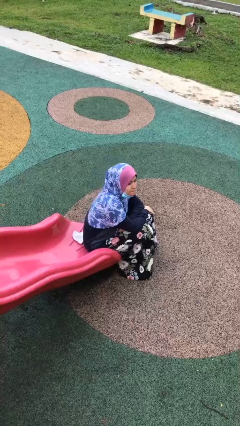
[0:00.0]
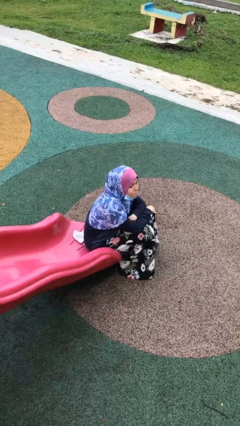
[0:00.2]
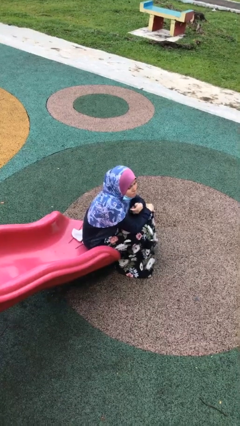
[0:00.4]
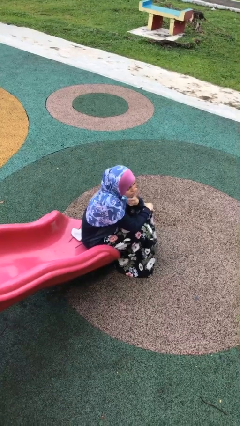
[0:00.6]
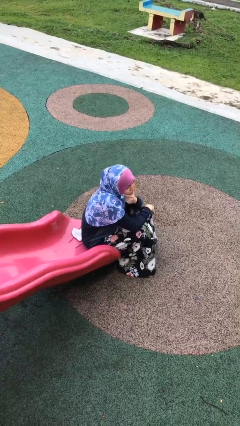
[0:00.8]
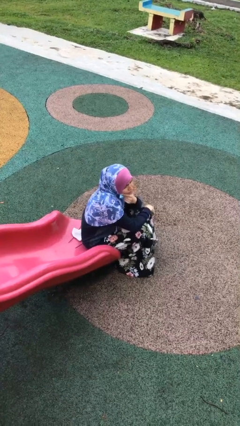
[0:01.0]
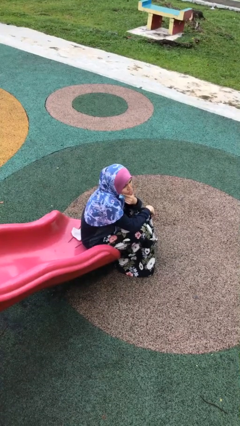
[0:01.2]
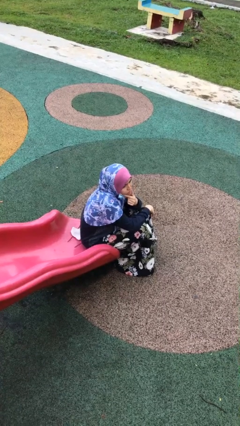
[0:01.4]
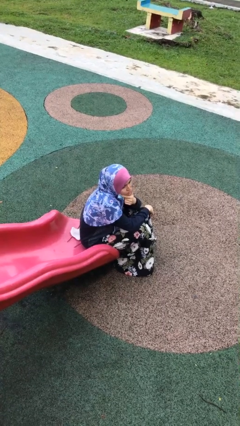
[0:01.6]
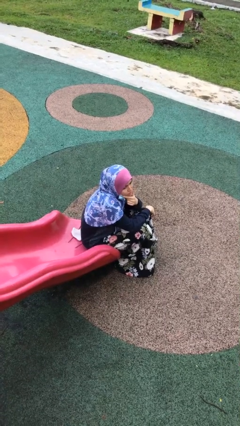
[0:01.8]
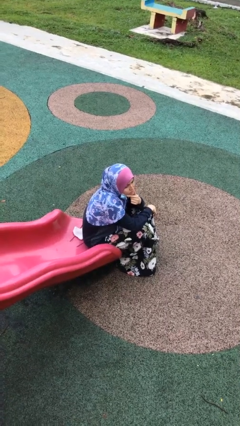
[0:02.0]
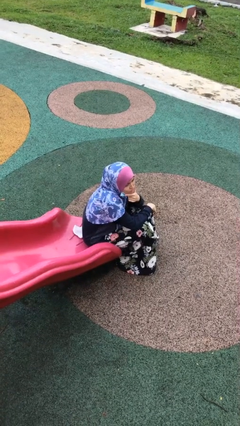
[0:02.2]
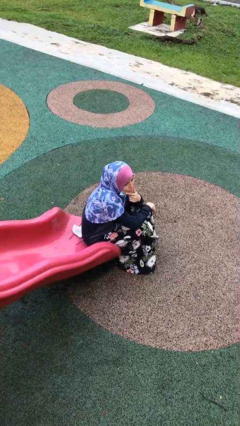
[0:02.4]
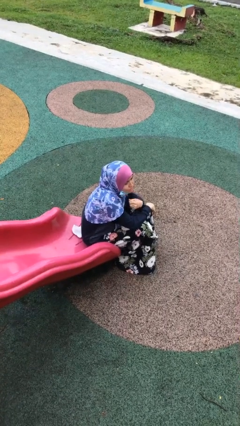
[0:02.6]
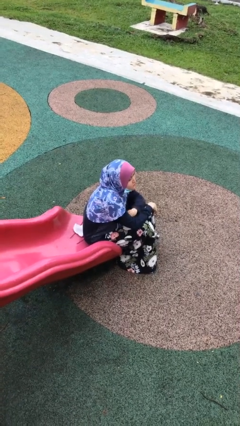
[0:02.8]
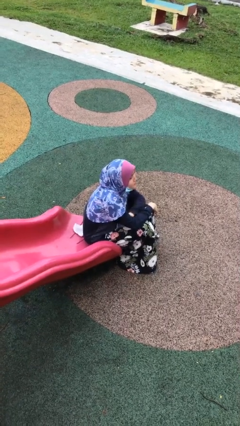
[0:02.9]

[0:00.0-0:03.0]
person strokes chin

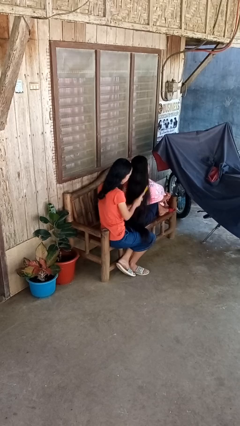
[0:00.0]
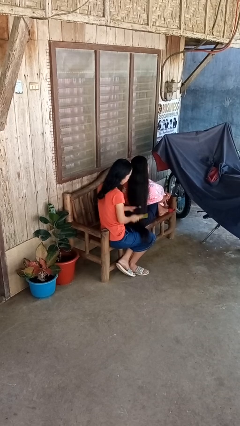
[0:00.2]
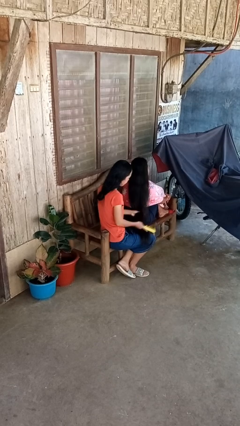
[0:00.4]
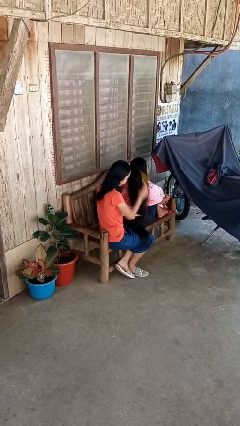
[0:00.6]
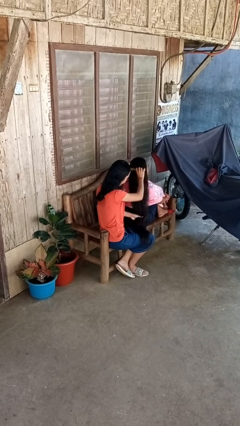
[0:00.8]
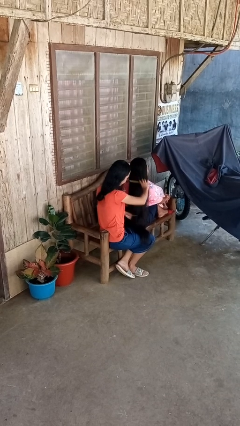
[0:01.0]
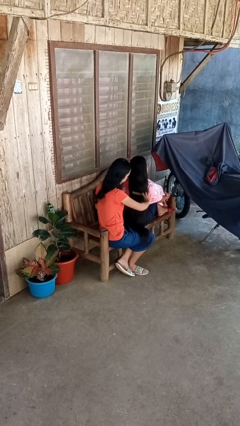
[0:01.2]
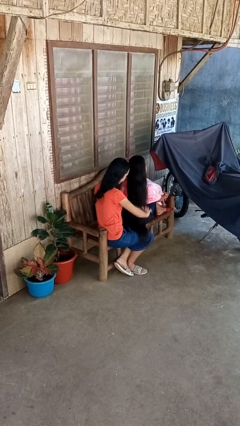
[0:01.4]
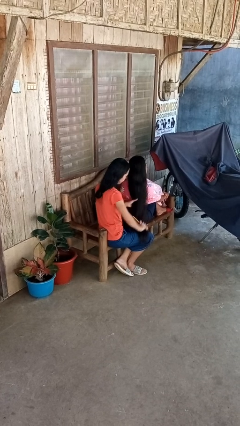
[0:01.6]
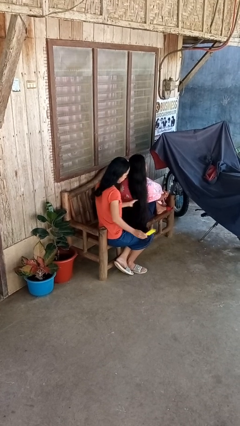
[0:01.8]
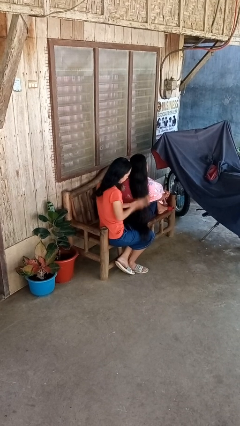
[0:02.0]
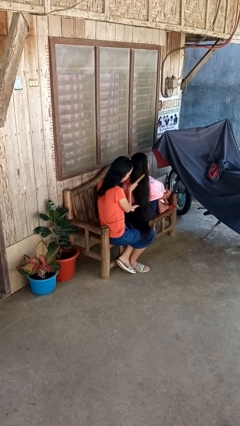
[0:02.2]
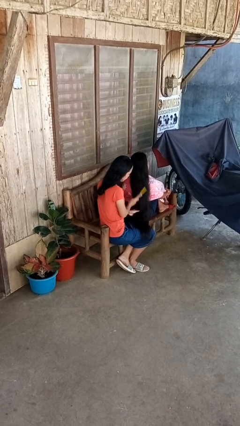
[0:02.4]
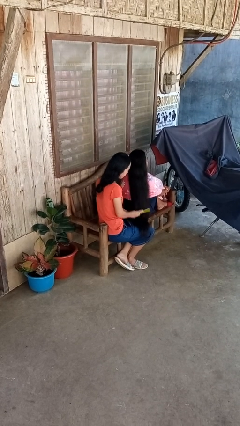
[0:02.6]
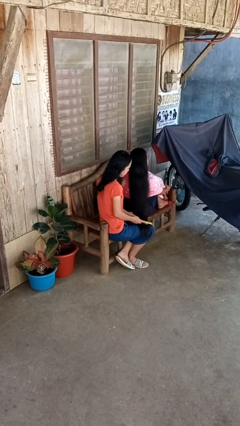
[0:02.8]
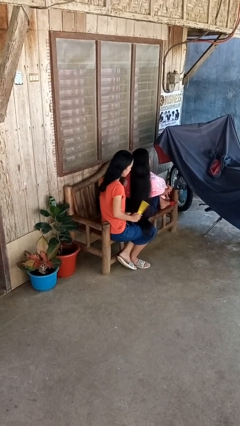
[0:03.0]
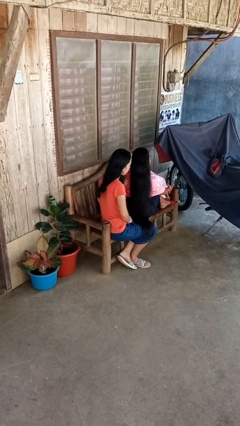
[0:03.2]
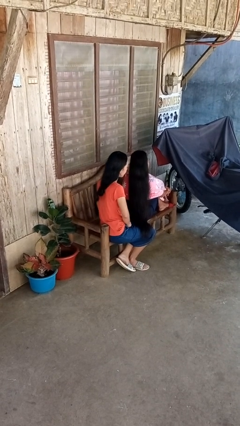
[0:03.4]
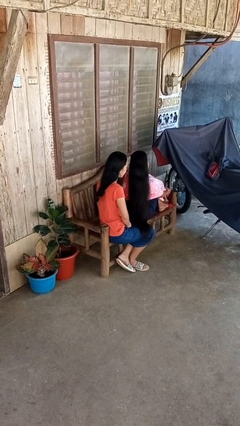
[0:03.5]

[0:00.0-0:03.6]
person brushes hair of person

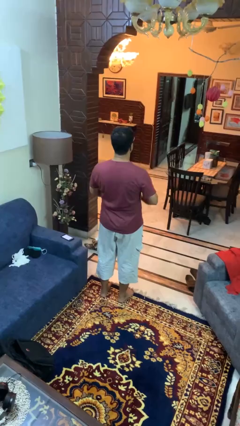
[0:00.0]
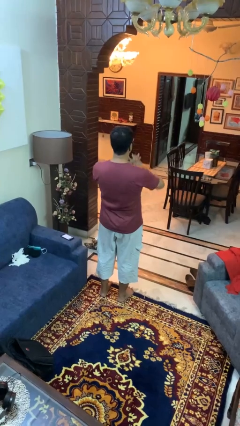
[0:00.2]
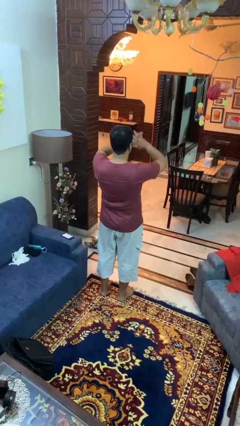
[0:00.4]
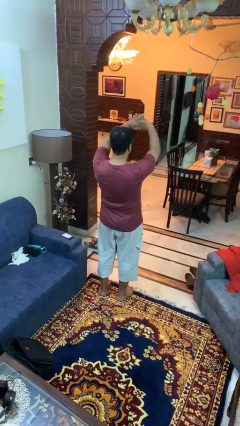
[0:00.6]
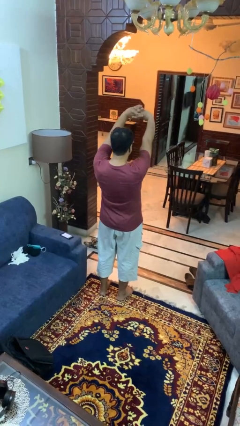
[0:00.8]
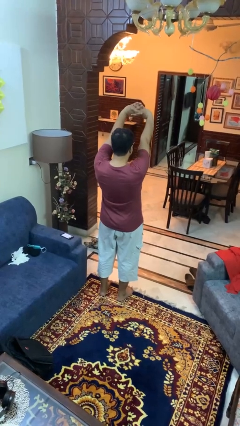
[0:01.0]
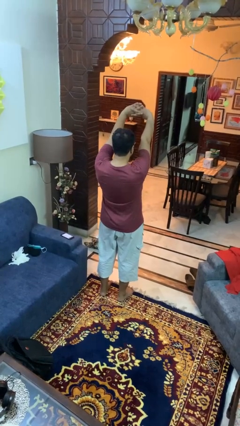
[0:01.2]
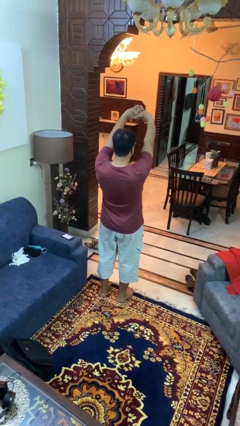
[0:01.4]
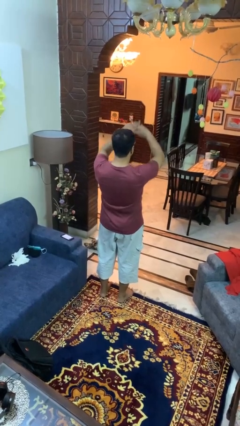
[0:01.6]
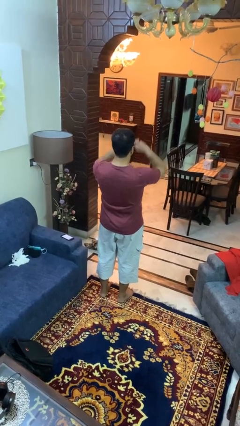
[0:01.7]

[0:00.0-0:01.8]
person stretches arms over head

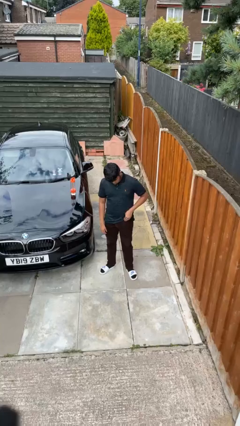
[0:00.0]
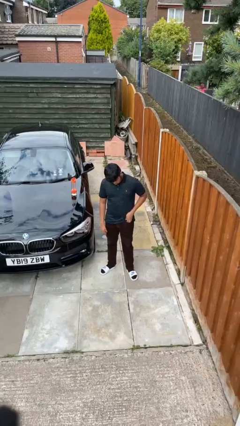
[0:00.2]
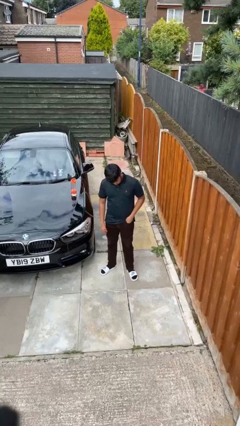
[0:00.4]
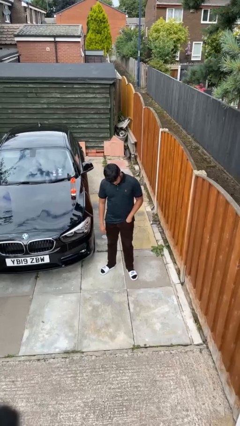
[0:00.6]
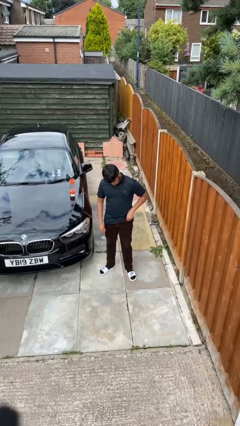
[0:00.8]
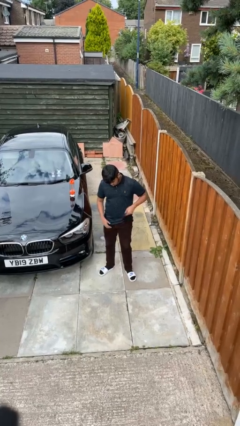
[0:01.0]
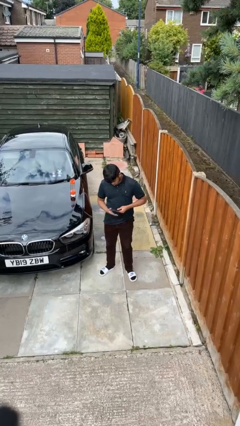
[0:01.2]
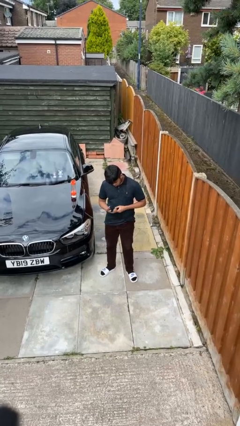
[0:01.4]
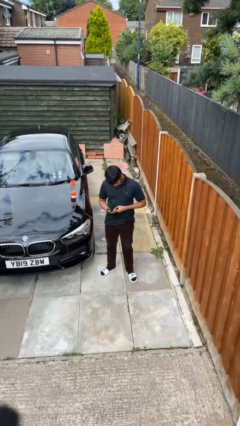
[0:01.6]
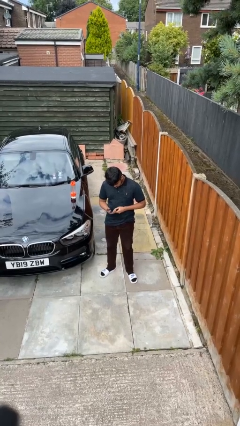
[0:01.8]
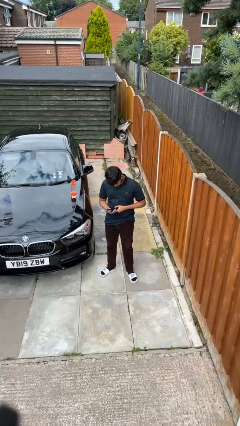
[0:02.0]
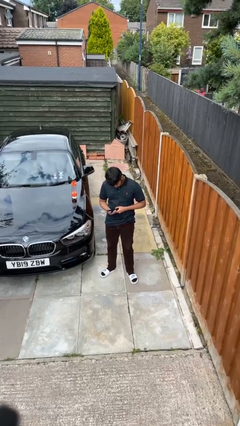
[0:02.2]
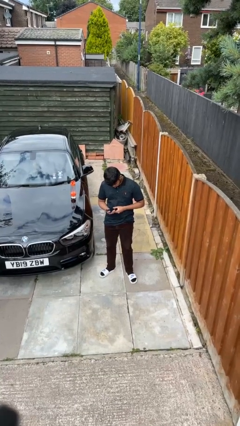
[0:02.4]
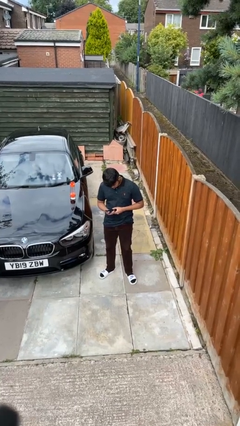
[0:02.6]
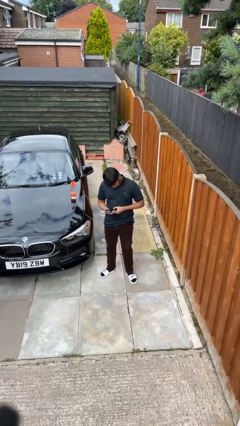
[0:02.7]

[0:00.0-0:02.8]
person takes phone from pocket

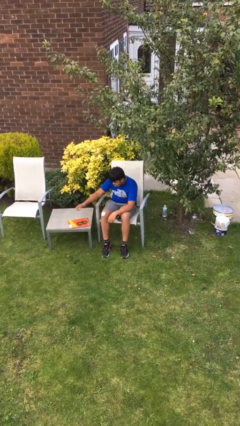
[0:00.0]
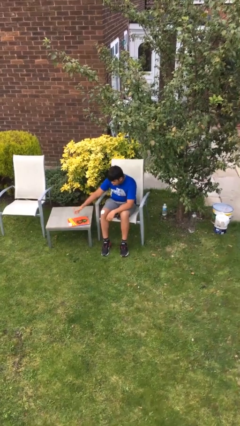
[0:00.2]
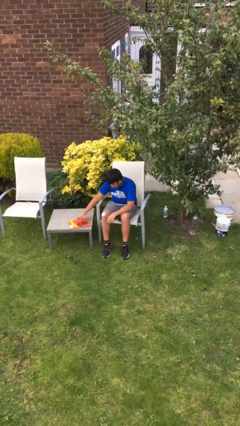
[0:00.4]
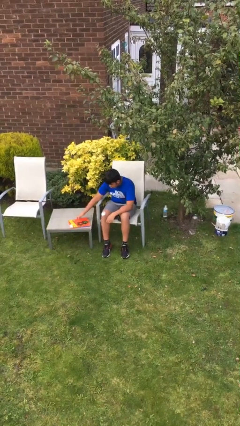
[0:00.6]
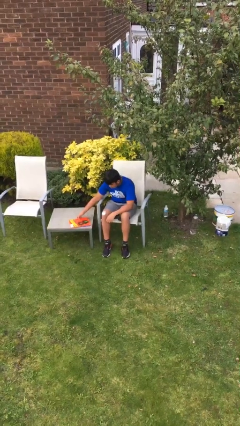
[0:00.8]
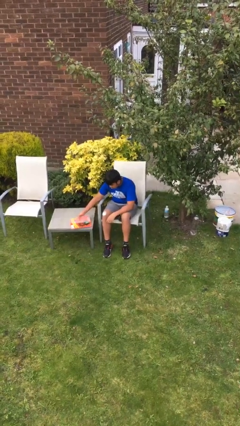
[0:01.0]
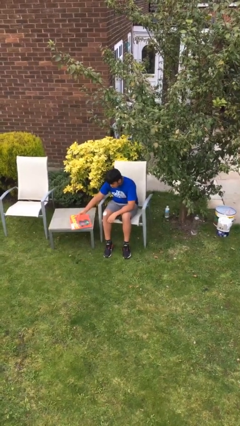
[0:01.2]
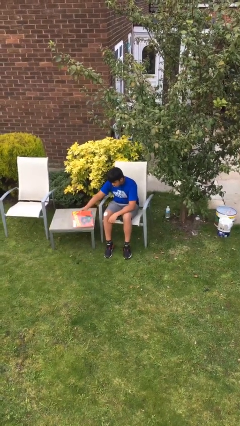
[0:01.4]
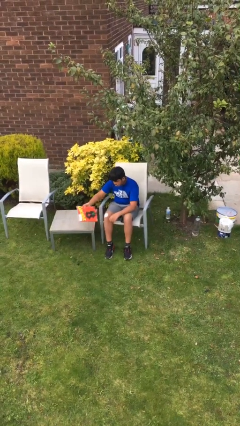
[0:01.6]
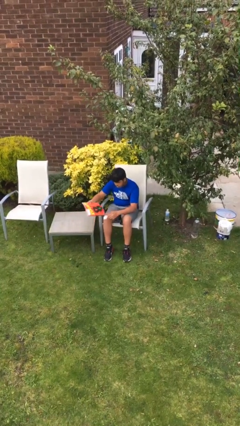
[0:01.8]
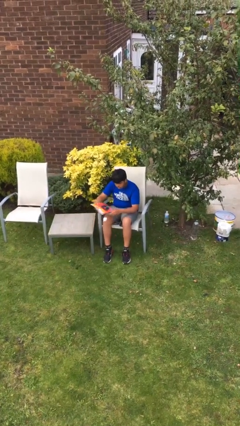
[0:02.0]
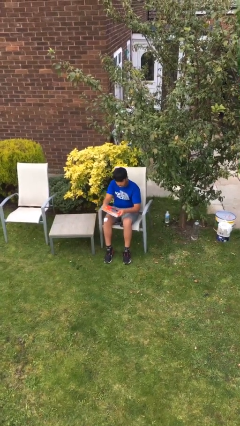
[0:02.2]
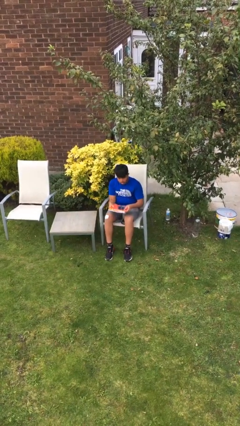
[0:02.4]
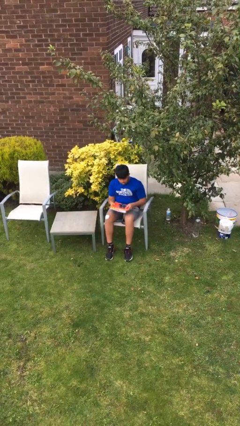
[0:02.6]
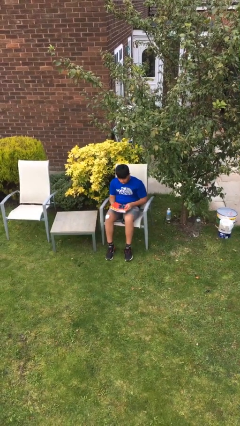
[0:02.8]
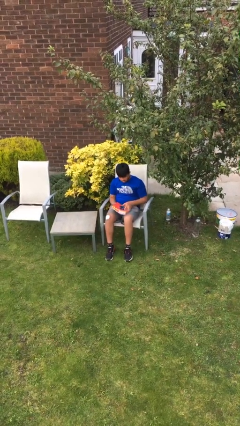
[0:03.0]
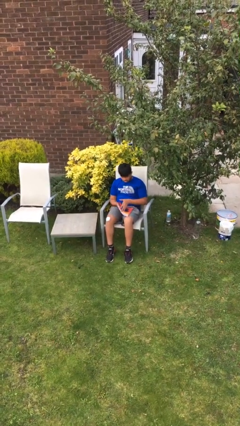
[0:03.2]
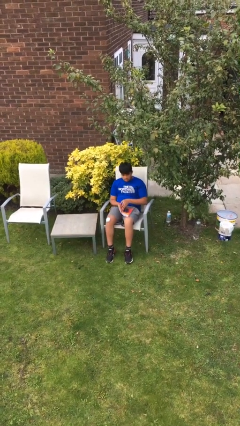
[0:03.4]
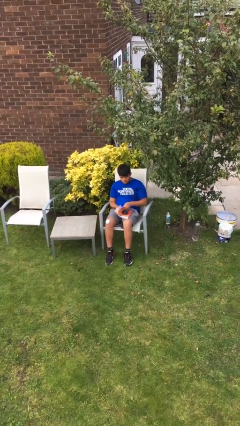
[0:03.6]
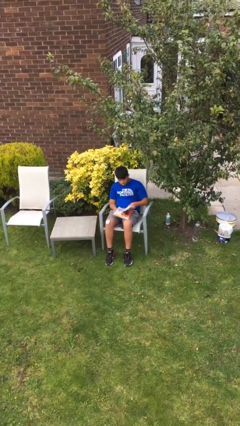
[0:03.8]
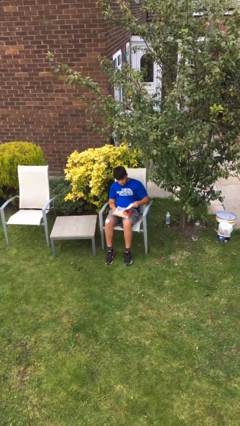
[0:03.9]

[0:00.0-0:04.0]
person picks up object from table

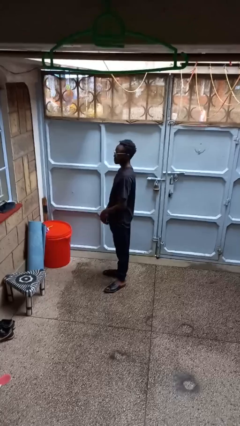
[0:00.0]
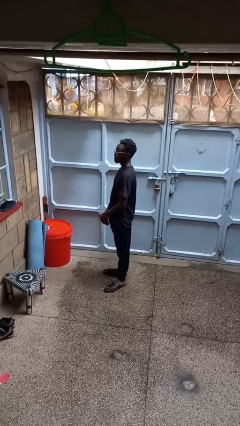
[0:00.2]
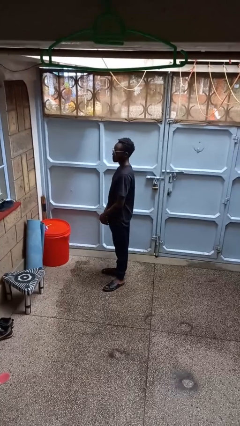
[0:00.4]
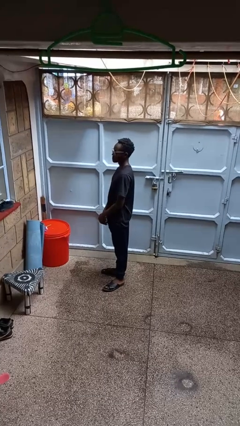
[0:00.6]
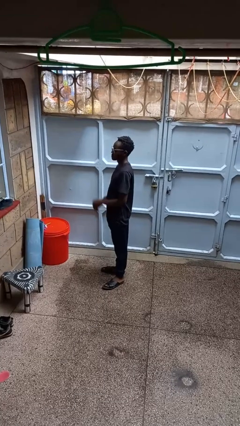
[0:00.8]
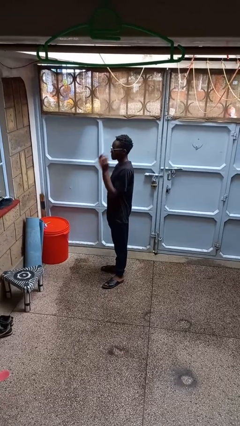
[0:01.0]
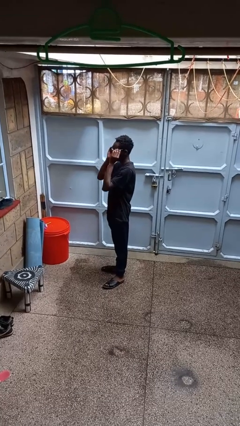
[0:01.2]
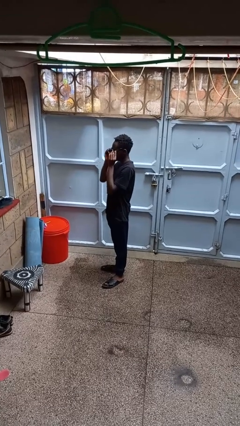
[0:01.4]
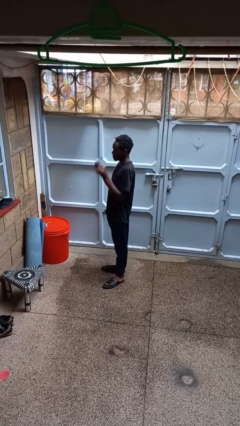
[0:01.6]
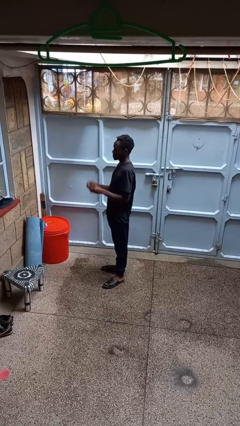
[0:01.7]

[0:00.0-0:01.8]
person takes off glasses

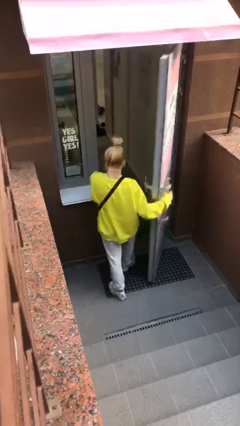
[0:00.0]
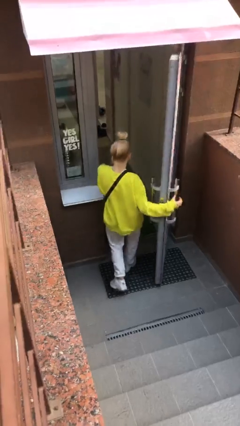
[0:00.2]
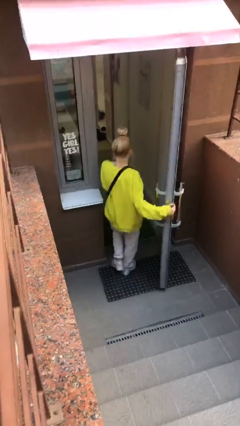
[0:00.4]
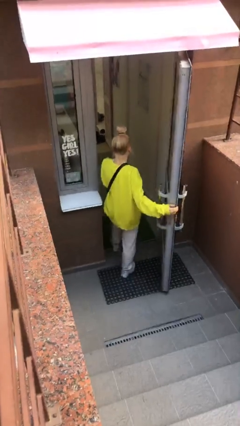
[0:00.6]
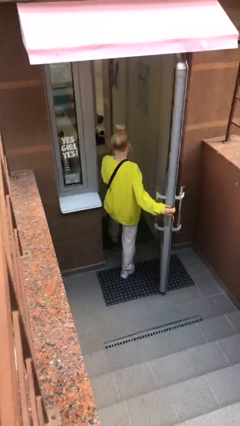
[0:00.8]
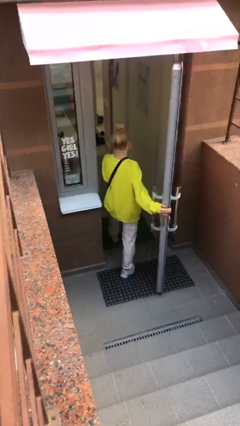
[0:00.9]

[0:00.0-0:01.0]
person exits scene through structure
